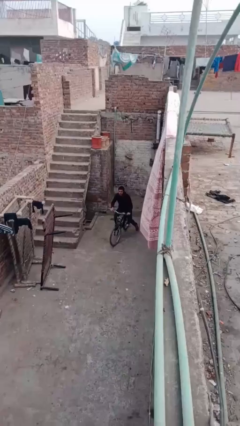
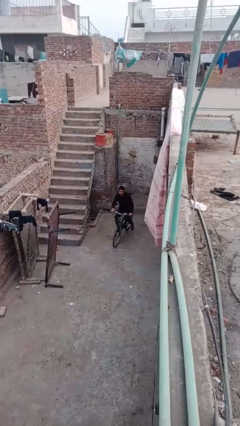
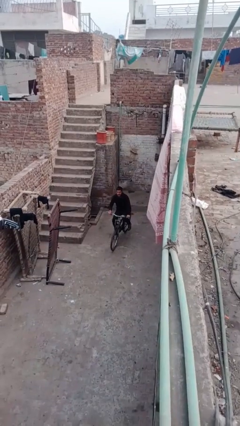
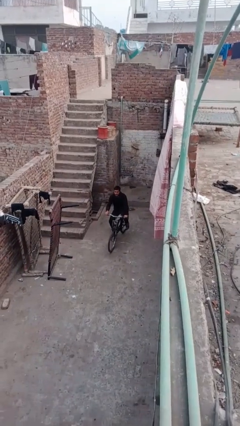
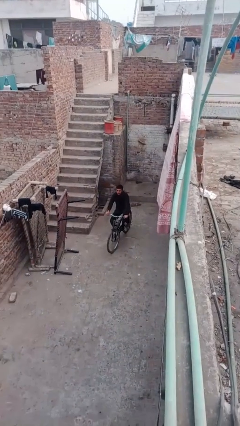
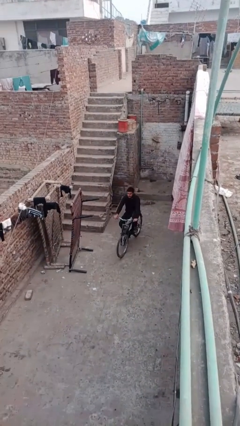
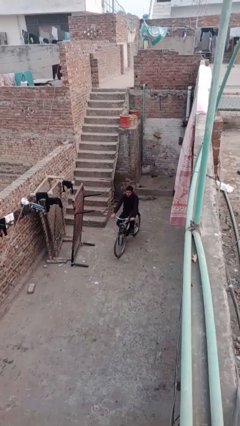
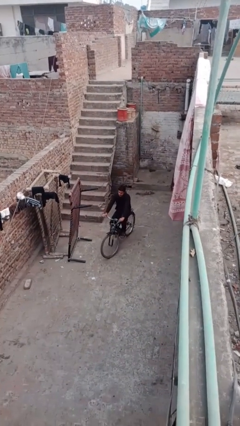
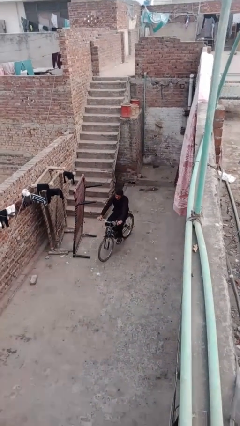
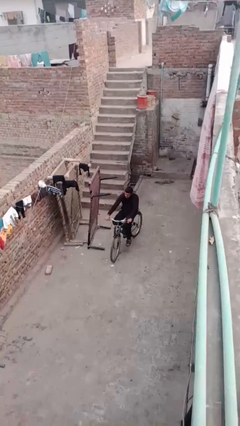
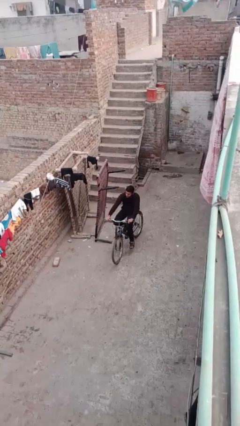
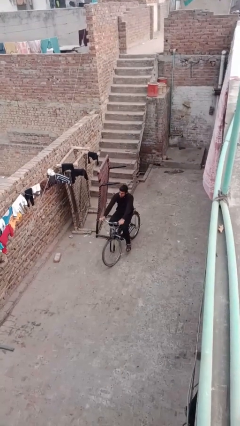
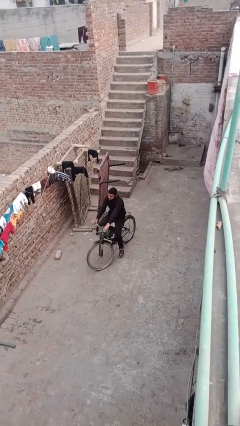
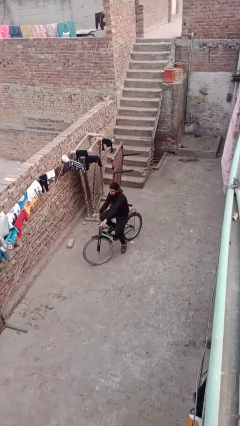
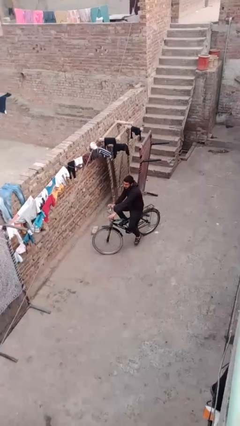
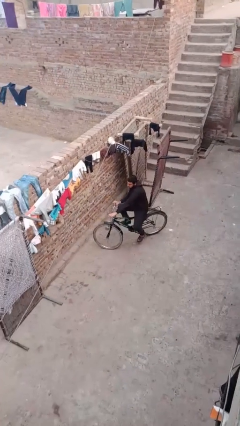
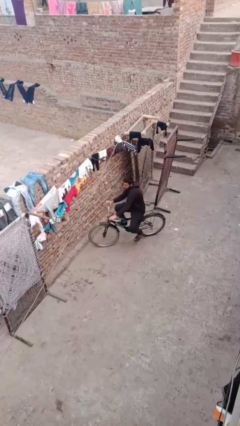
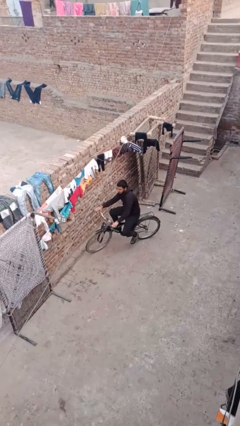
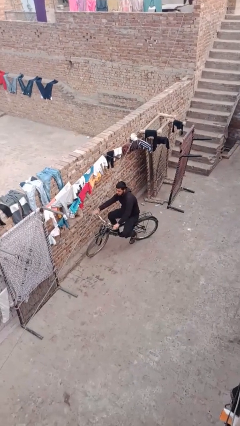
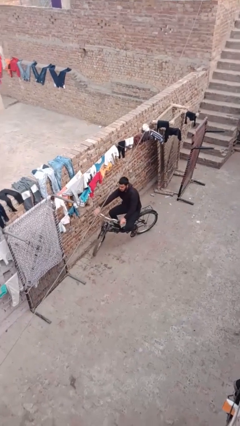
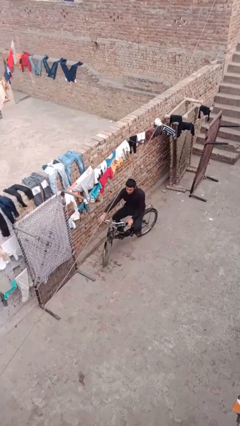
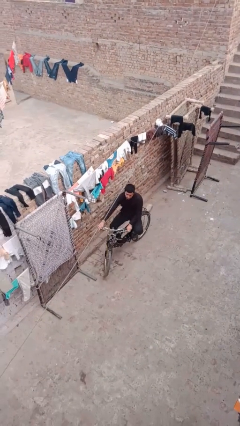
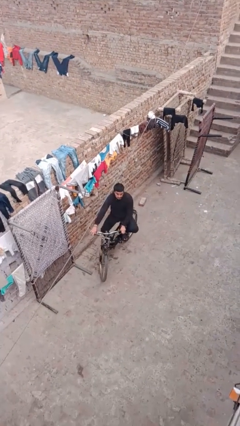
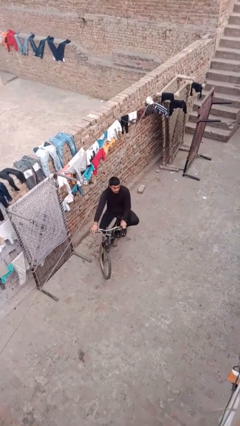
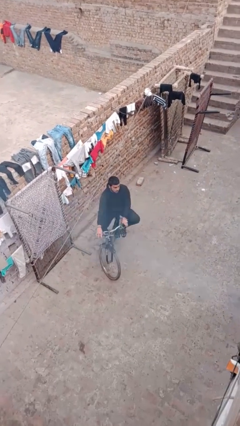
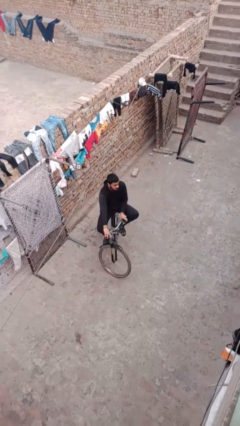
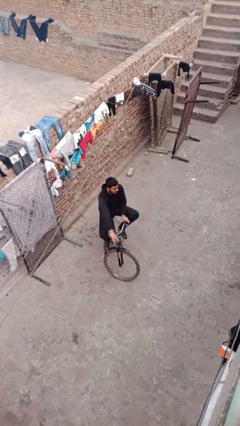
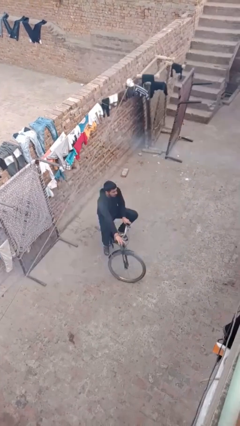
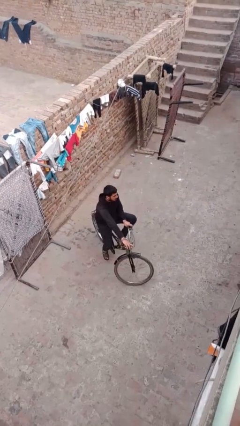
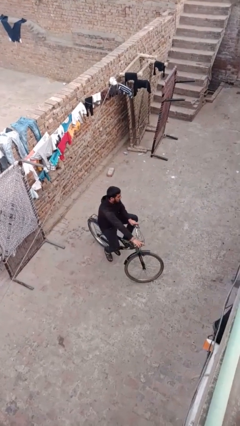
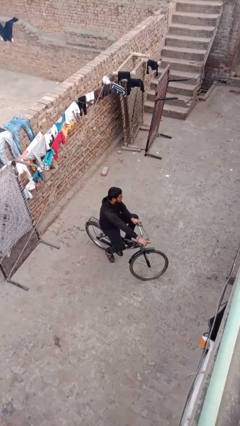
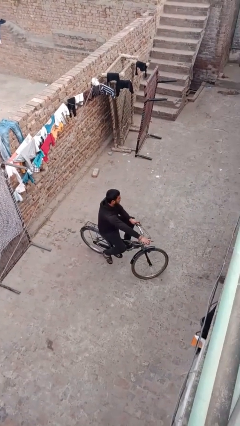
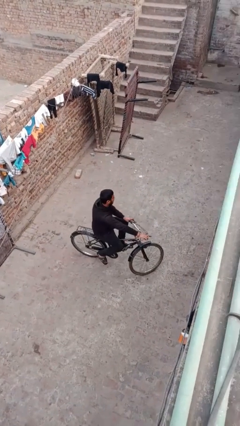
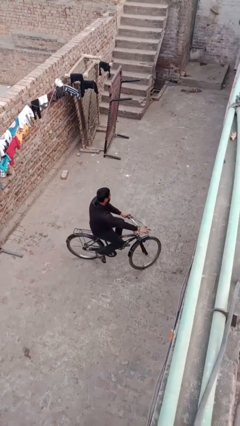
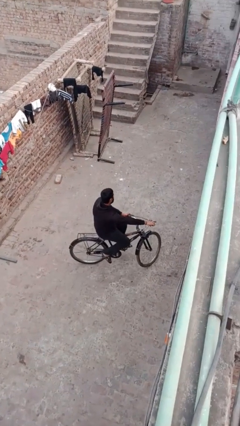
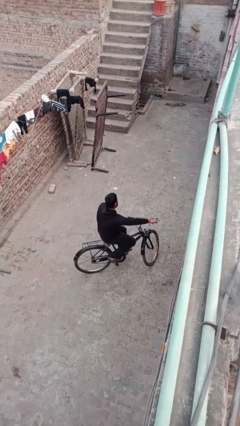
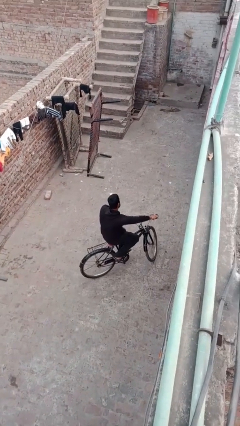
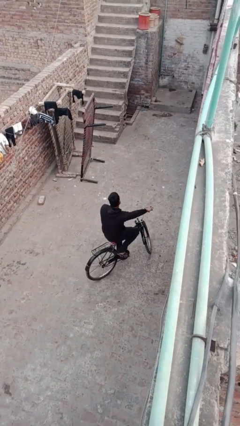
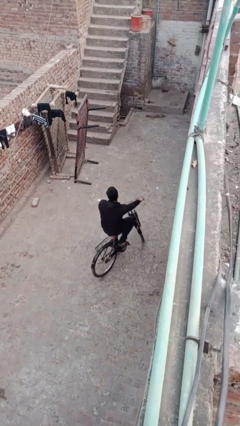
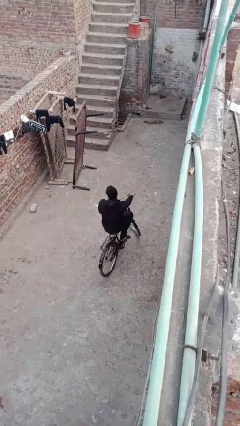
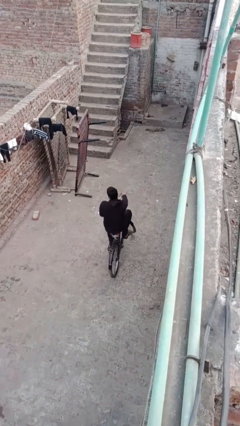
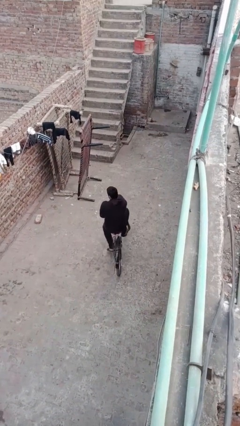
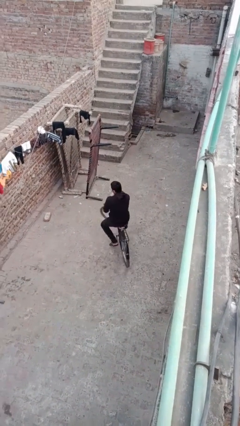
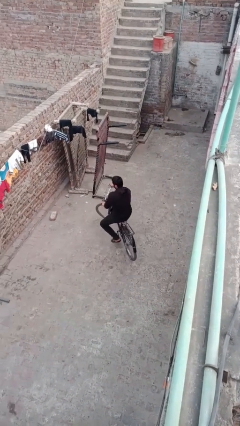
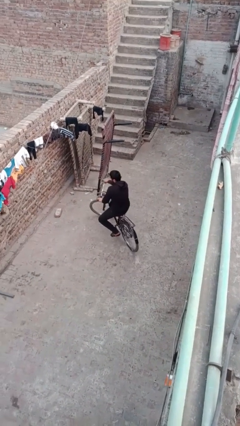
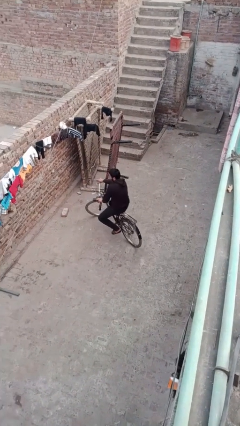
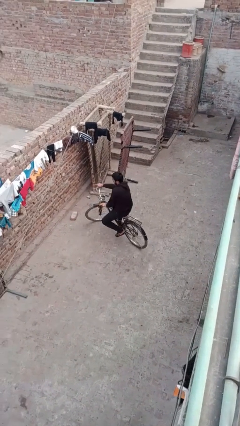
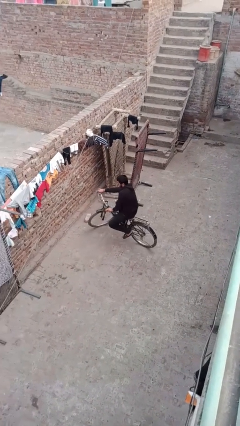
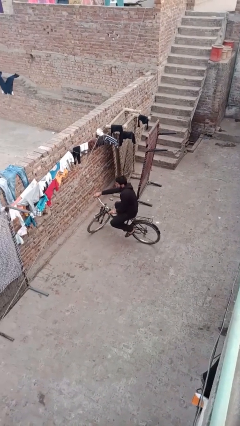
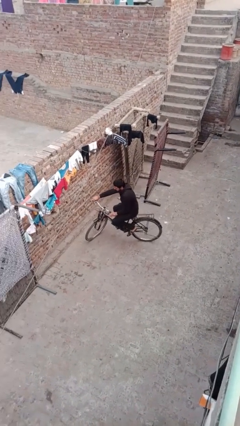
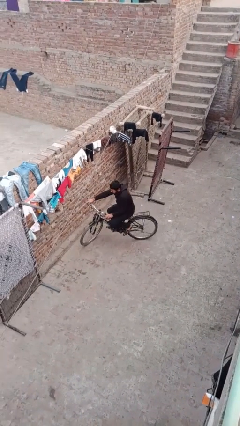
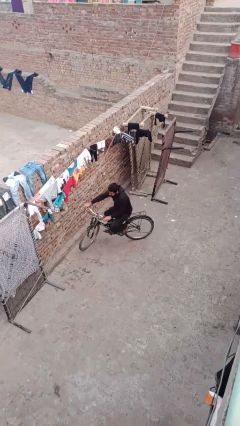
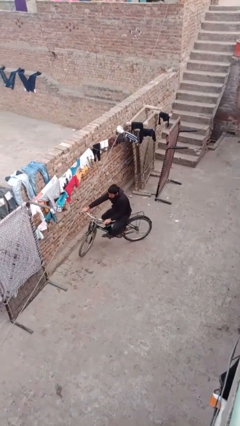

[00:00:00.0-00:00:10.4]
person rides bicycle

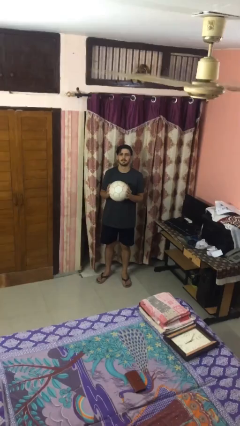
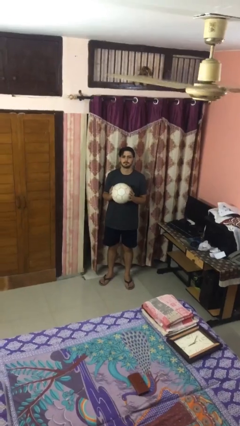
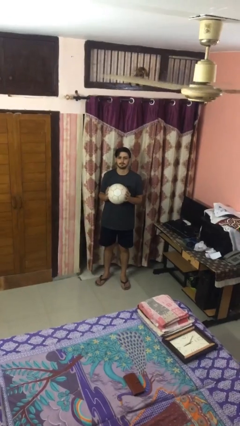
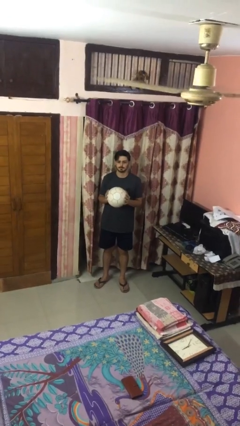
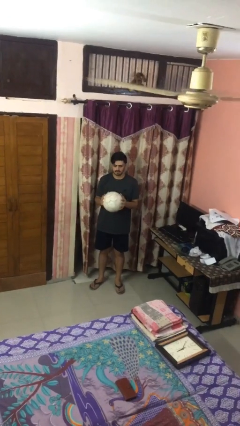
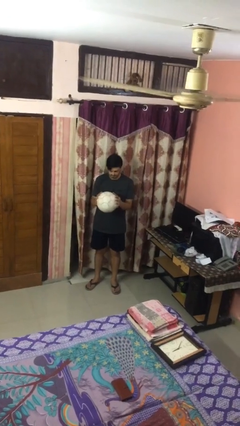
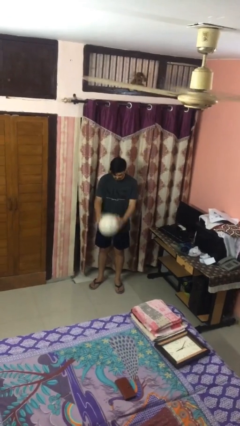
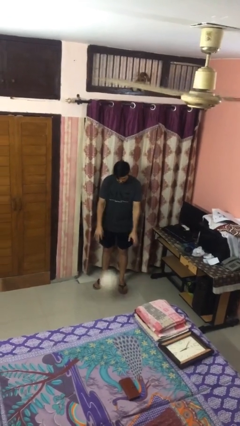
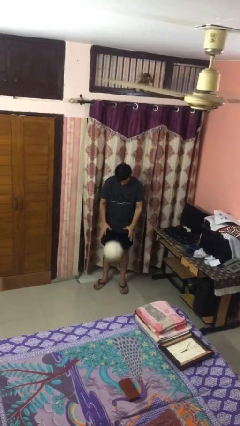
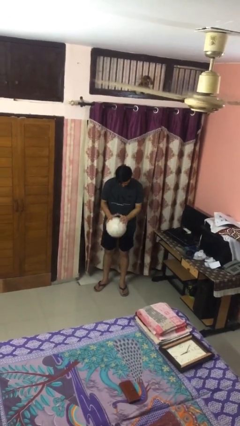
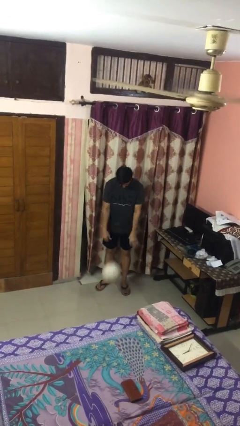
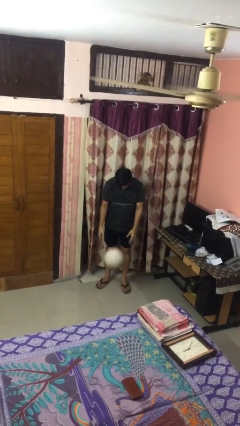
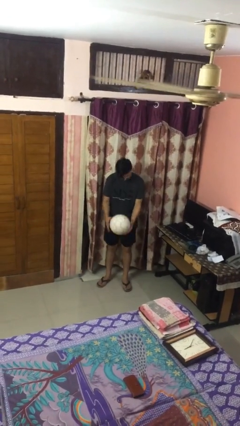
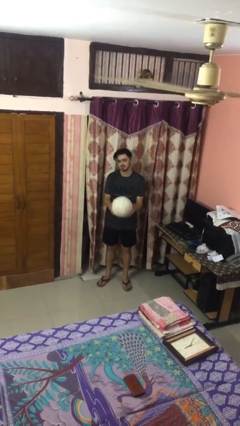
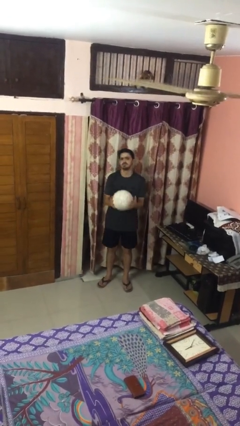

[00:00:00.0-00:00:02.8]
person bounces ball on floor

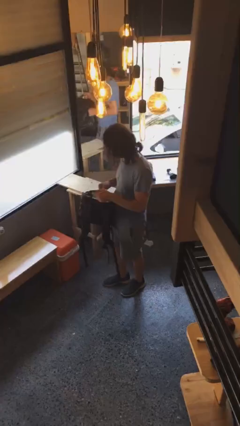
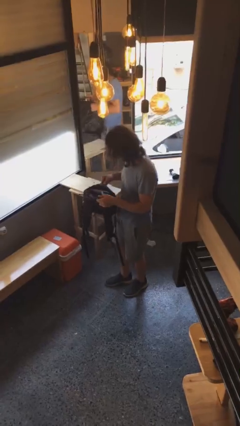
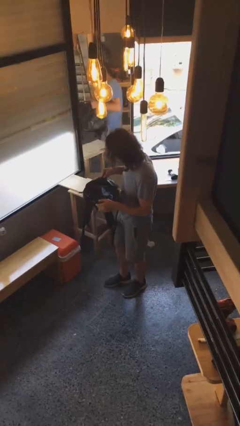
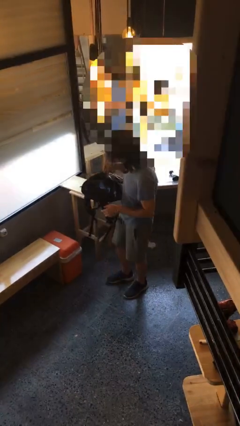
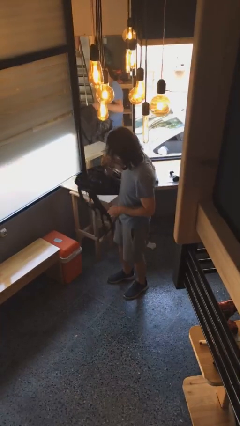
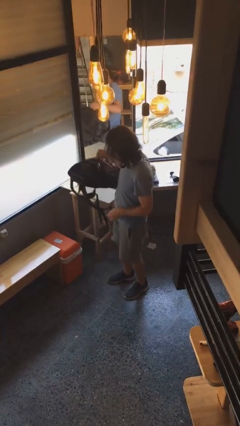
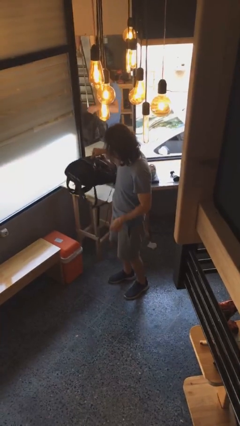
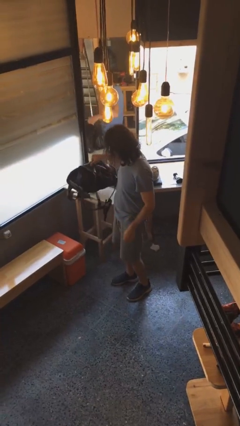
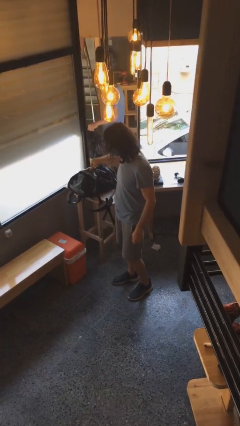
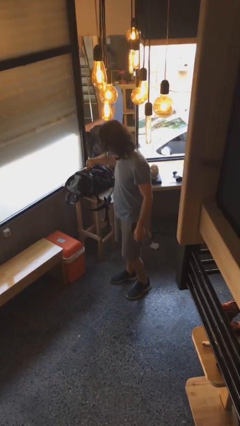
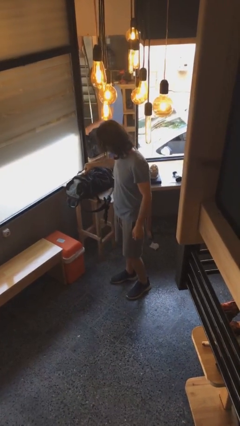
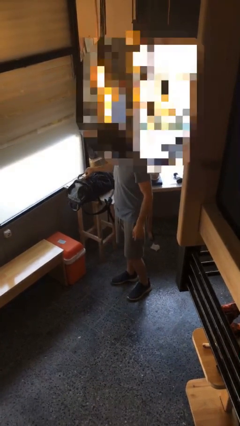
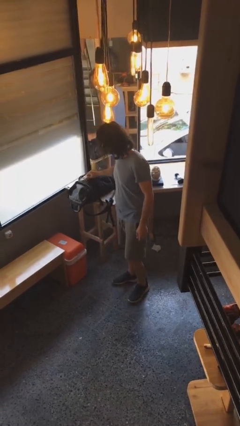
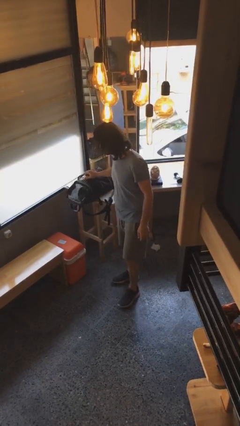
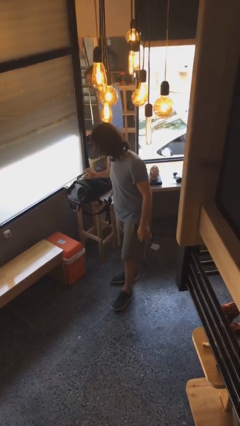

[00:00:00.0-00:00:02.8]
person puts down object on table

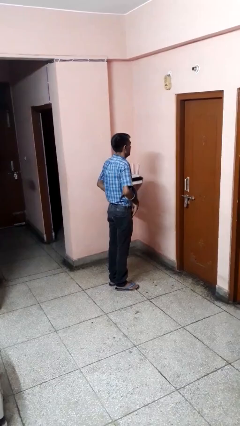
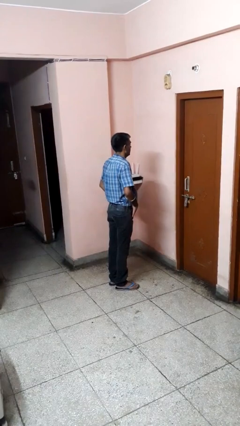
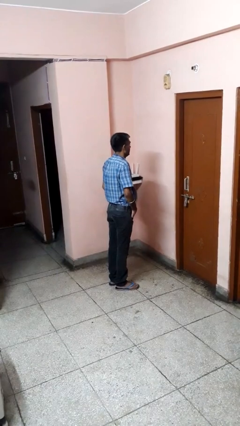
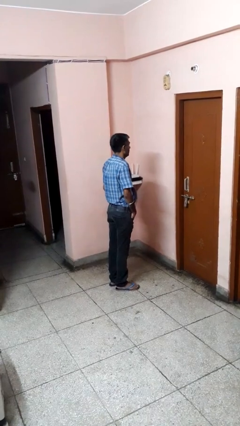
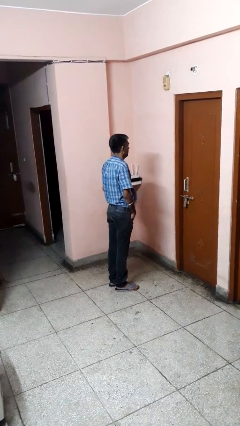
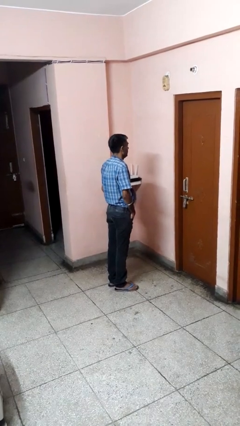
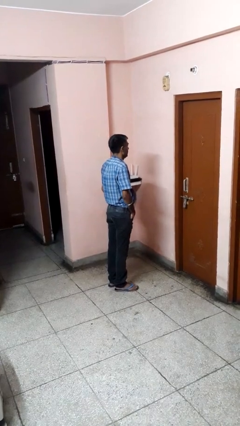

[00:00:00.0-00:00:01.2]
person puts hands in back pockets
